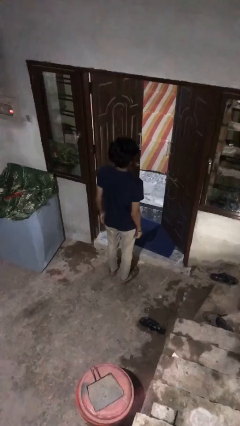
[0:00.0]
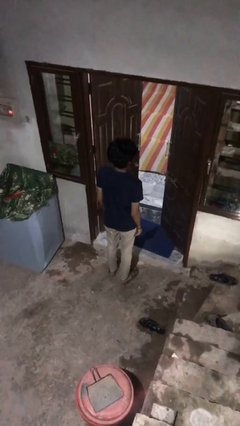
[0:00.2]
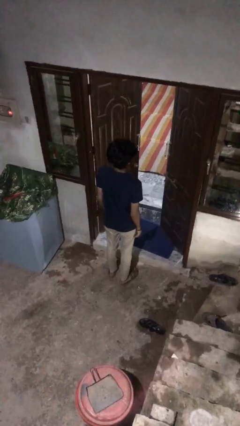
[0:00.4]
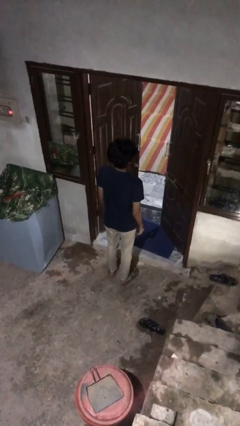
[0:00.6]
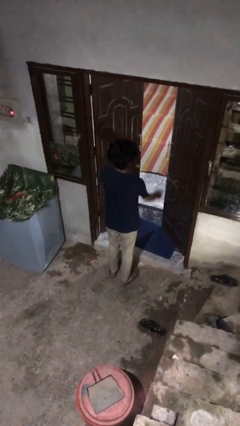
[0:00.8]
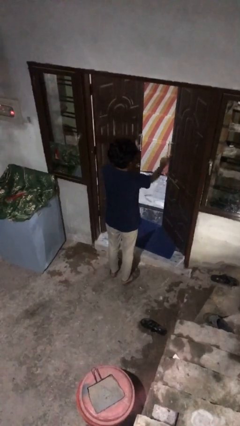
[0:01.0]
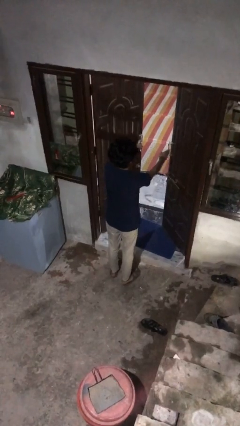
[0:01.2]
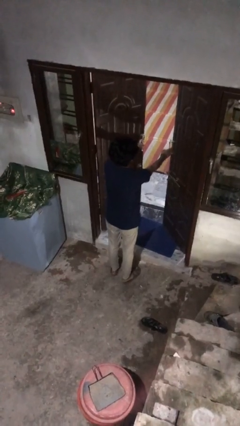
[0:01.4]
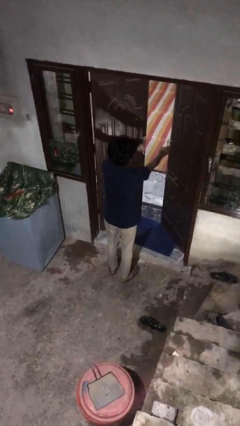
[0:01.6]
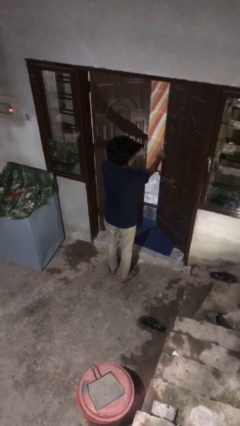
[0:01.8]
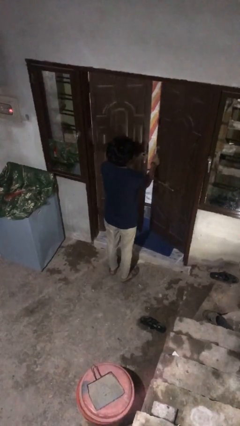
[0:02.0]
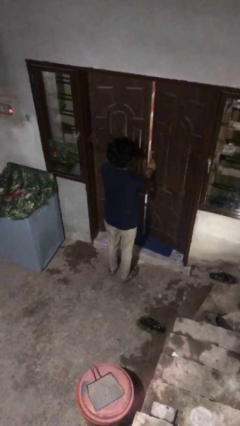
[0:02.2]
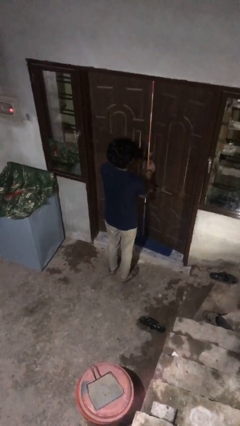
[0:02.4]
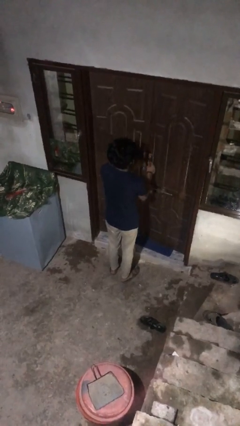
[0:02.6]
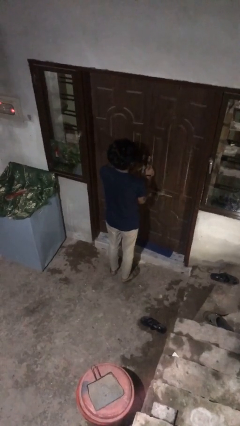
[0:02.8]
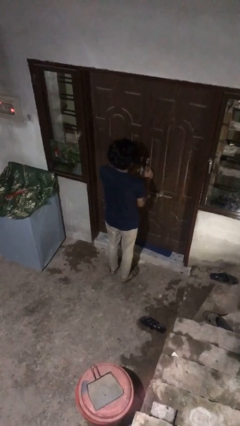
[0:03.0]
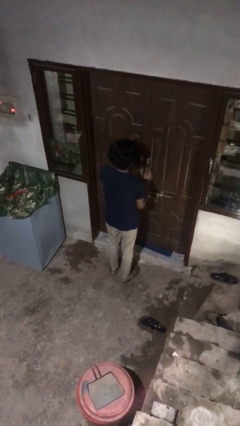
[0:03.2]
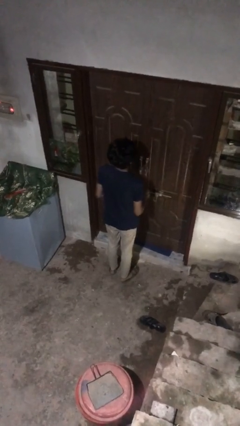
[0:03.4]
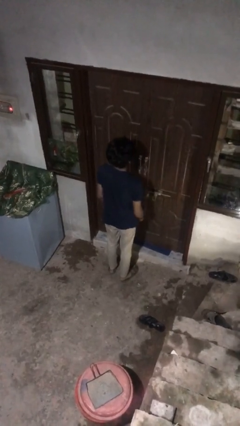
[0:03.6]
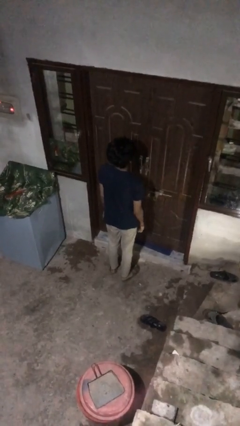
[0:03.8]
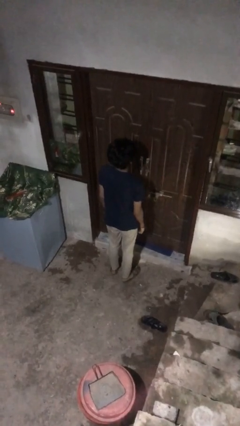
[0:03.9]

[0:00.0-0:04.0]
person closes facility door

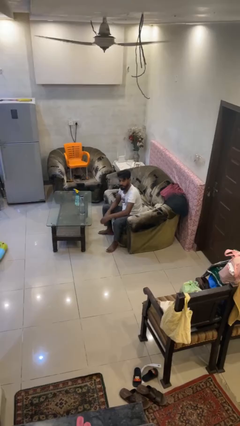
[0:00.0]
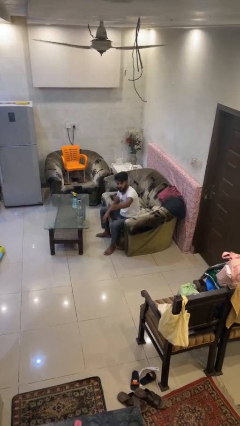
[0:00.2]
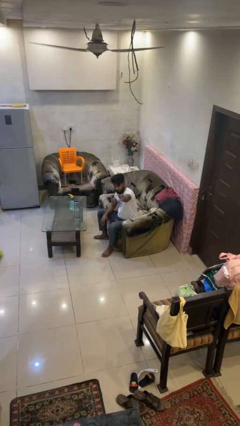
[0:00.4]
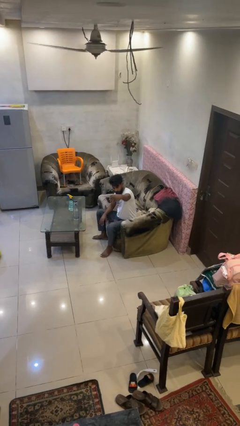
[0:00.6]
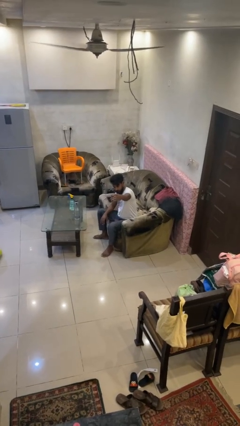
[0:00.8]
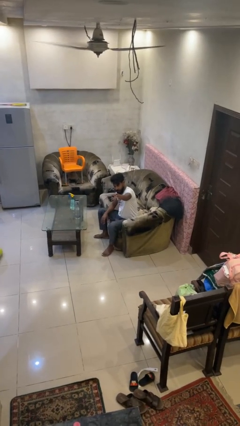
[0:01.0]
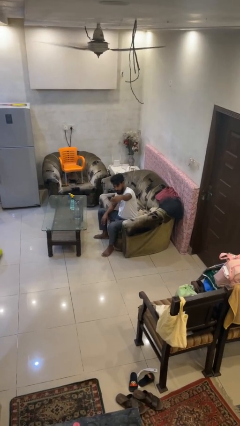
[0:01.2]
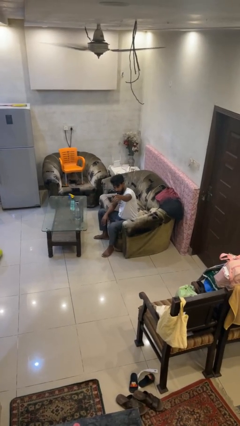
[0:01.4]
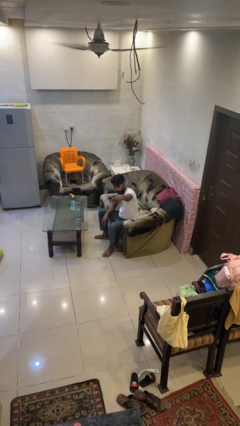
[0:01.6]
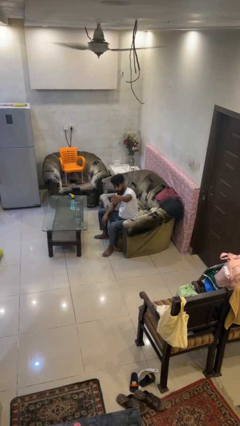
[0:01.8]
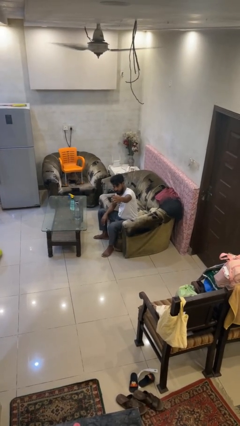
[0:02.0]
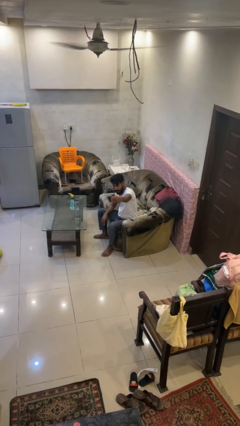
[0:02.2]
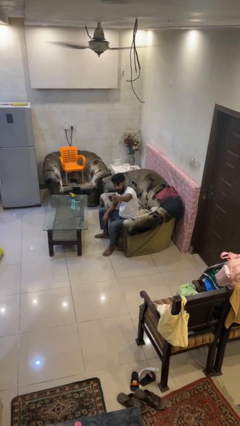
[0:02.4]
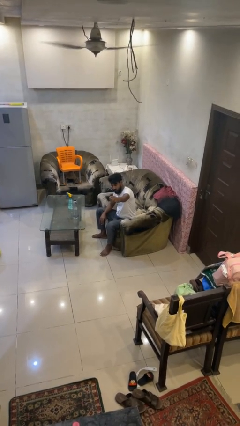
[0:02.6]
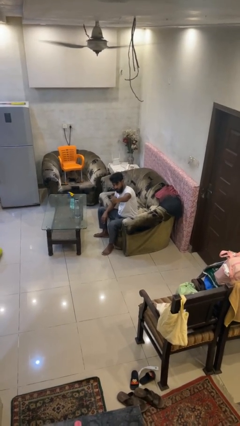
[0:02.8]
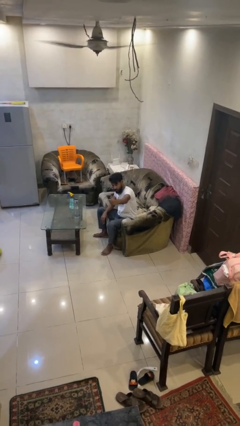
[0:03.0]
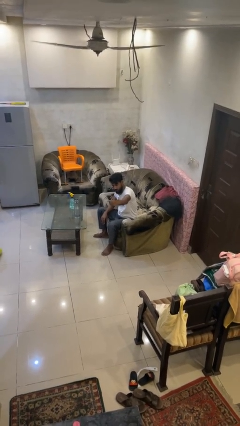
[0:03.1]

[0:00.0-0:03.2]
person gestures come here

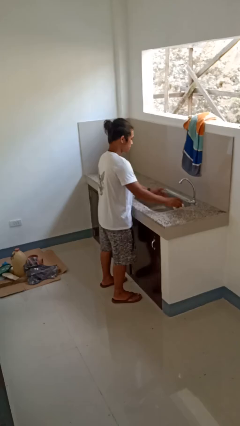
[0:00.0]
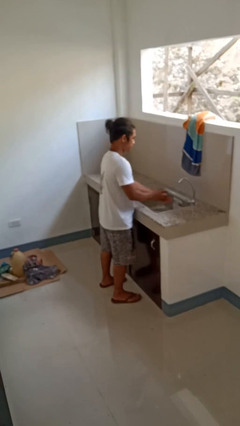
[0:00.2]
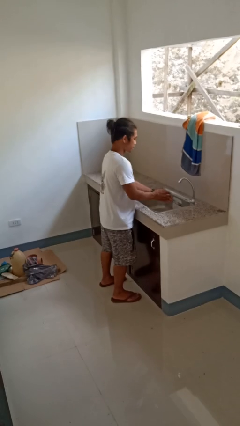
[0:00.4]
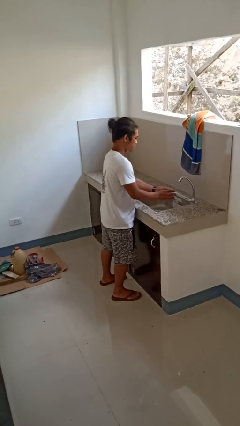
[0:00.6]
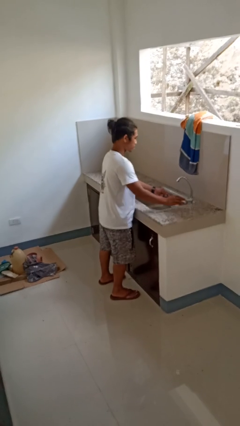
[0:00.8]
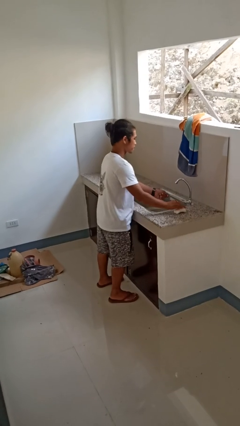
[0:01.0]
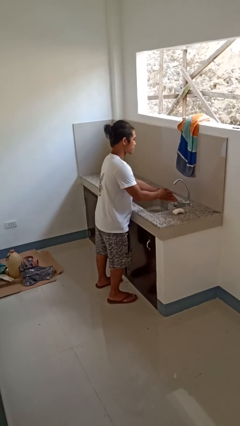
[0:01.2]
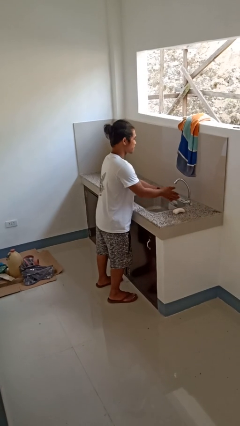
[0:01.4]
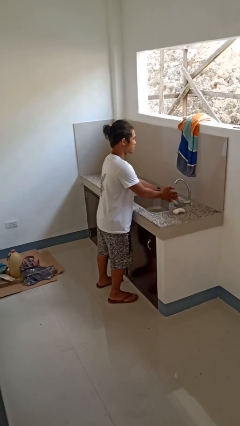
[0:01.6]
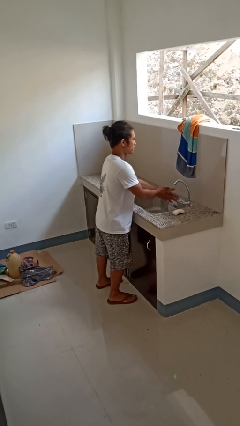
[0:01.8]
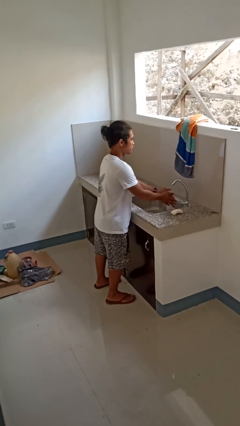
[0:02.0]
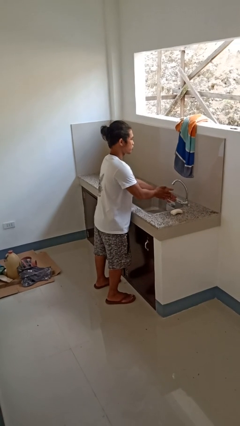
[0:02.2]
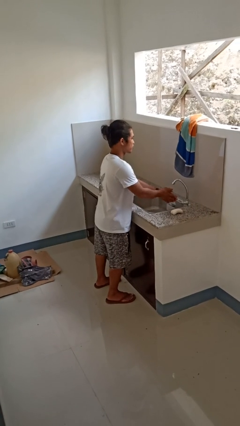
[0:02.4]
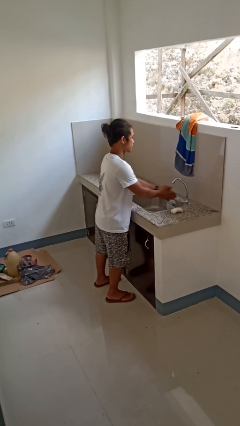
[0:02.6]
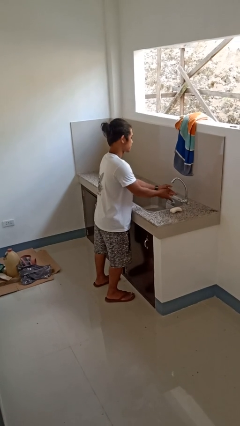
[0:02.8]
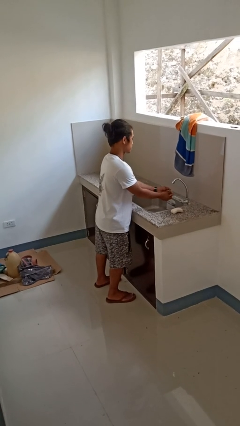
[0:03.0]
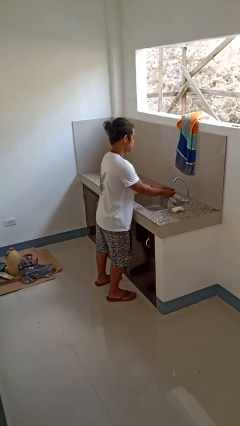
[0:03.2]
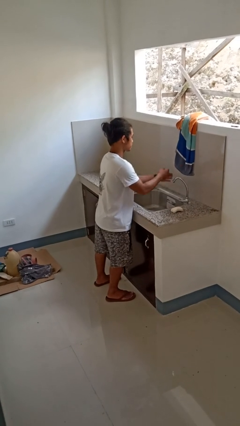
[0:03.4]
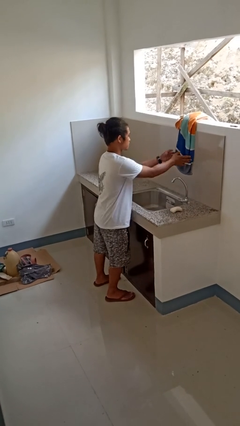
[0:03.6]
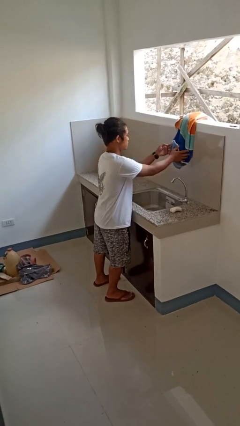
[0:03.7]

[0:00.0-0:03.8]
person washes hands

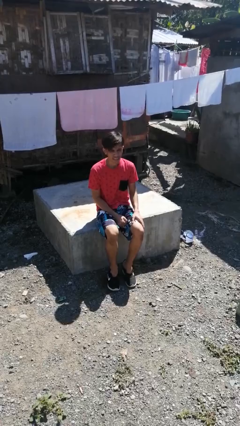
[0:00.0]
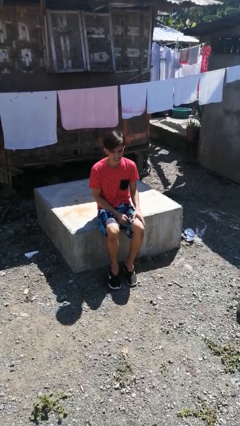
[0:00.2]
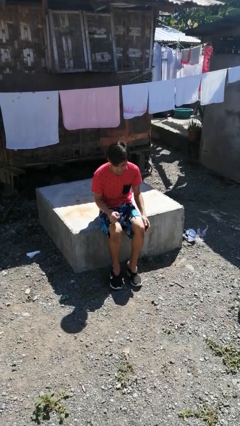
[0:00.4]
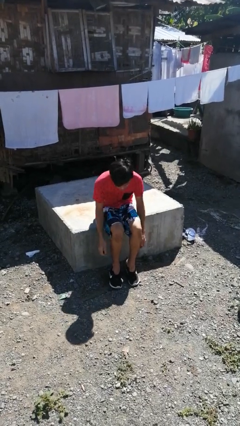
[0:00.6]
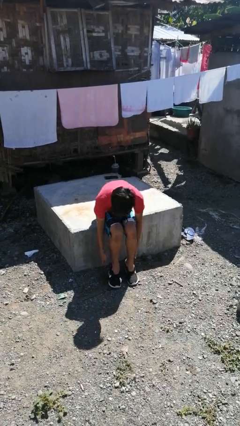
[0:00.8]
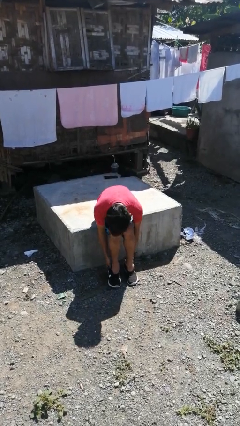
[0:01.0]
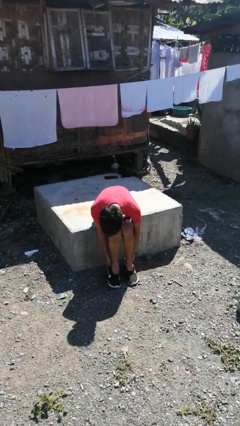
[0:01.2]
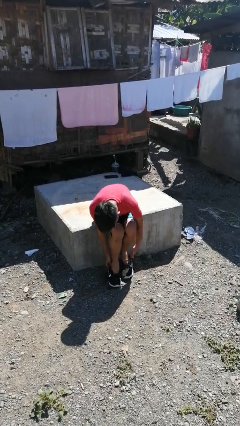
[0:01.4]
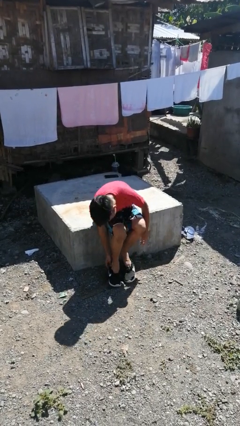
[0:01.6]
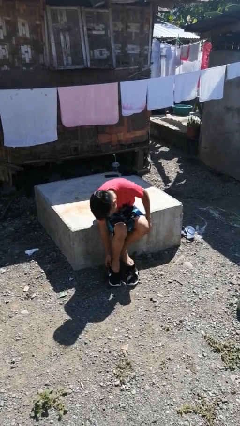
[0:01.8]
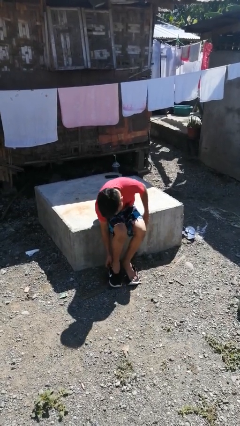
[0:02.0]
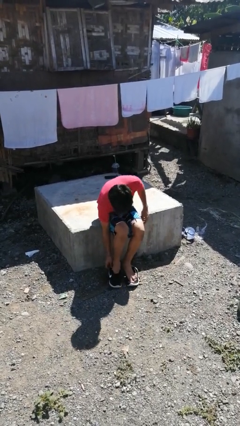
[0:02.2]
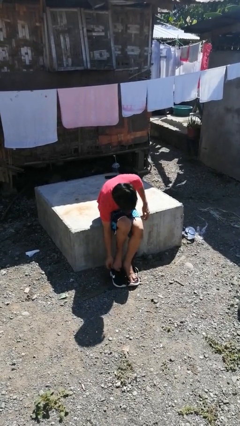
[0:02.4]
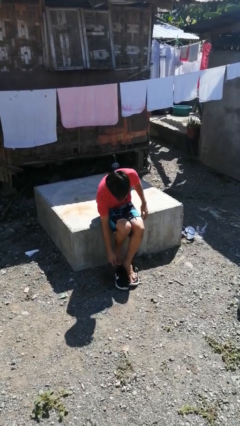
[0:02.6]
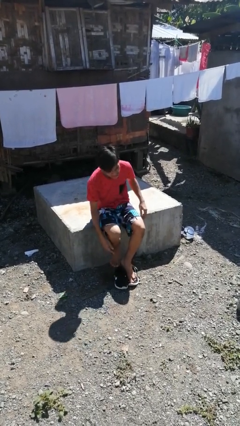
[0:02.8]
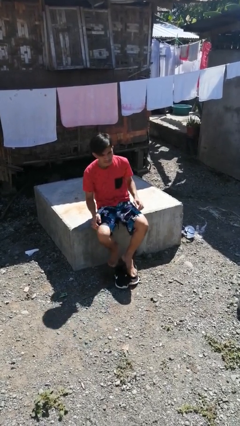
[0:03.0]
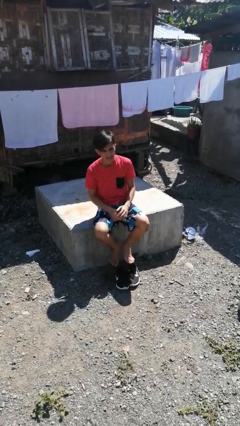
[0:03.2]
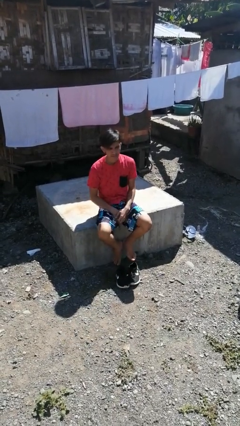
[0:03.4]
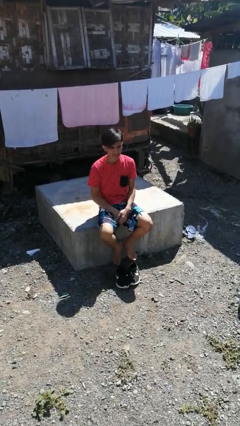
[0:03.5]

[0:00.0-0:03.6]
person takes off shoes

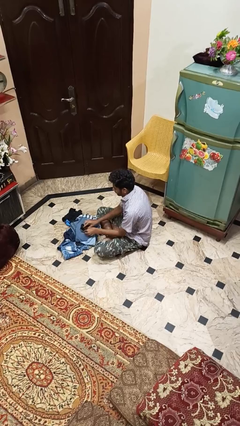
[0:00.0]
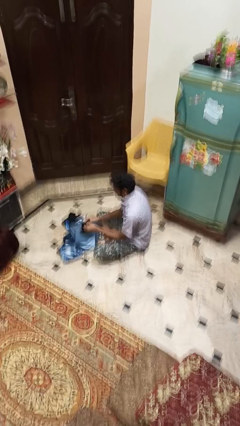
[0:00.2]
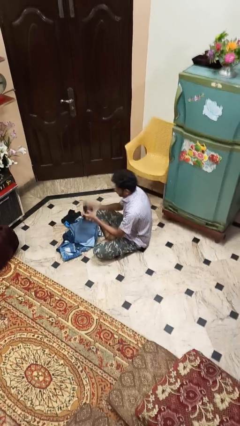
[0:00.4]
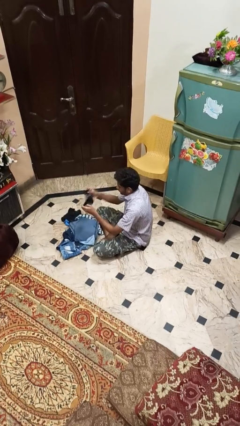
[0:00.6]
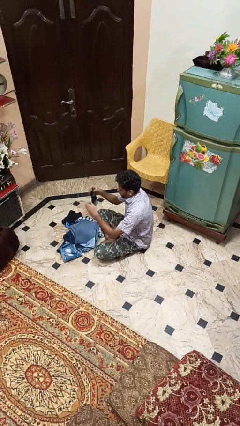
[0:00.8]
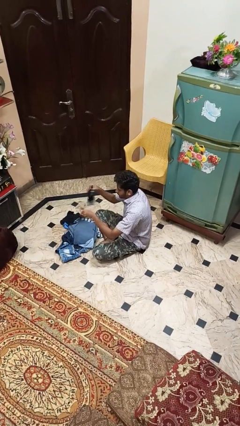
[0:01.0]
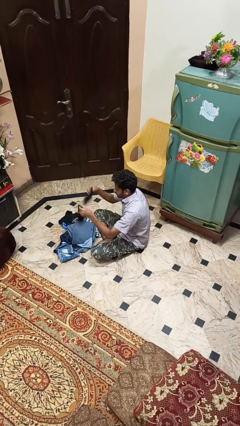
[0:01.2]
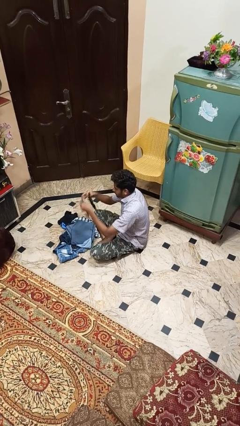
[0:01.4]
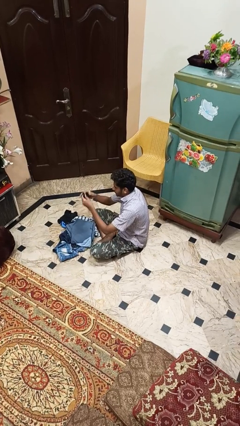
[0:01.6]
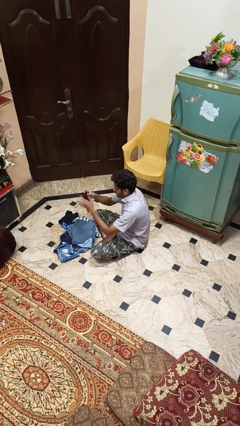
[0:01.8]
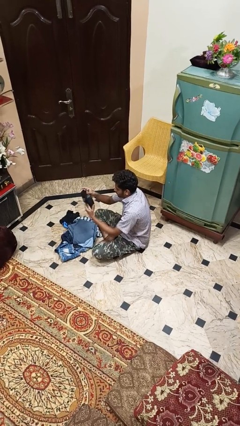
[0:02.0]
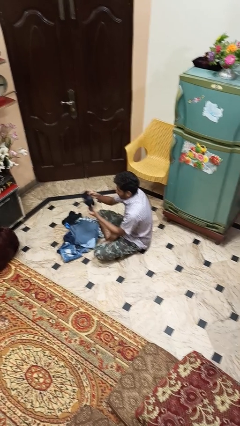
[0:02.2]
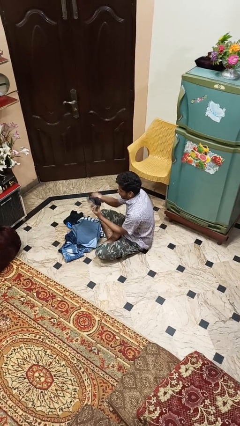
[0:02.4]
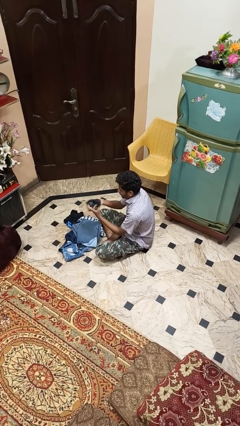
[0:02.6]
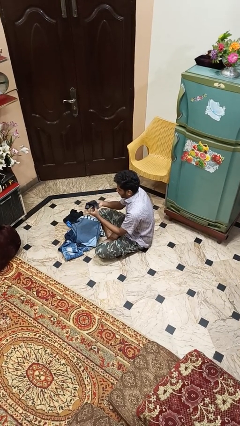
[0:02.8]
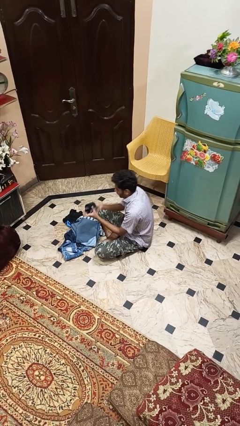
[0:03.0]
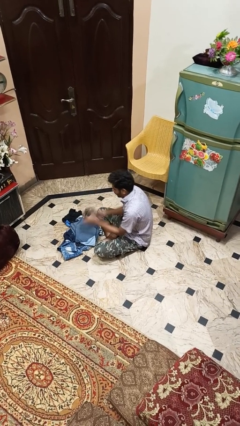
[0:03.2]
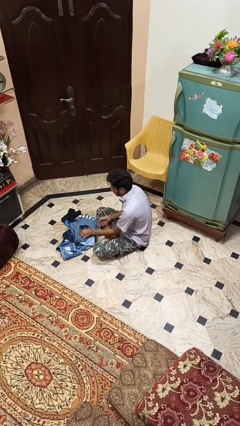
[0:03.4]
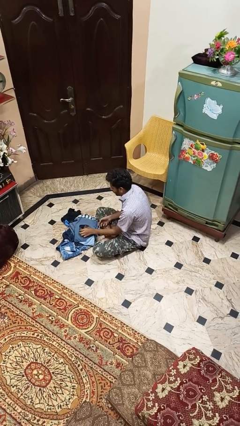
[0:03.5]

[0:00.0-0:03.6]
person folds socks
